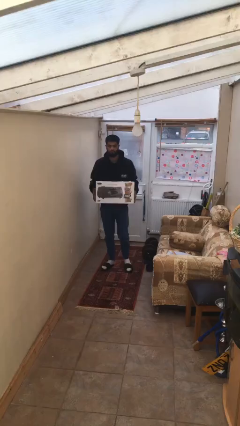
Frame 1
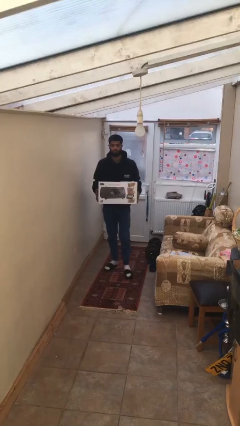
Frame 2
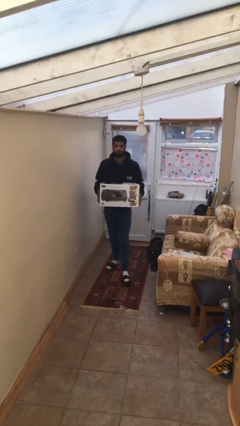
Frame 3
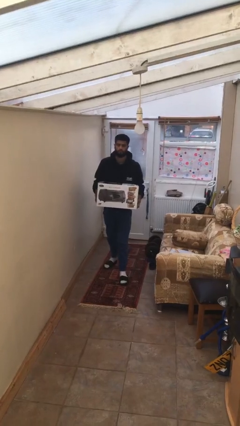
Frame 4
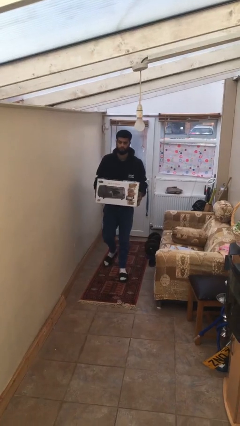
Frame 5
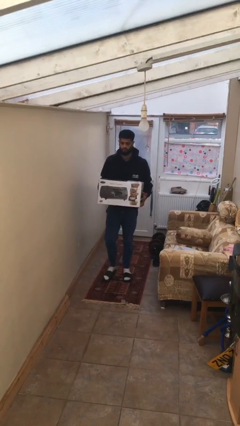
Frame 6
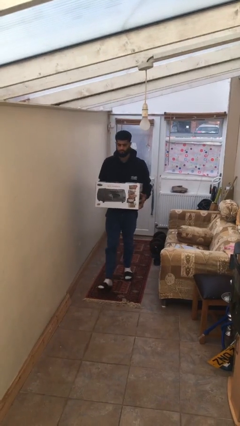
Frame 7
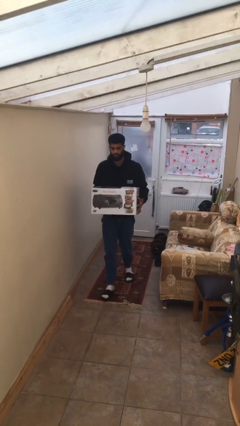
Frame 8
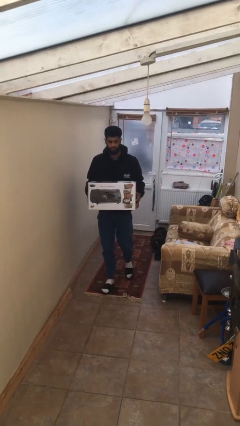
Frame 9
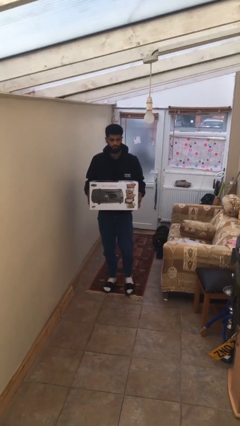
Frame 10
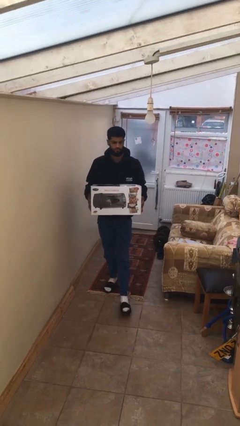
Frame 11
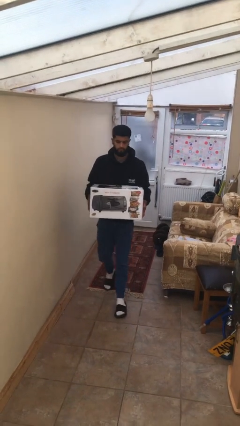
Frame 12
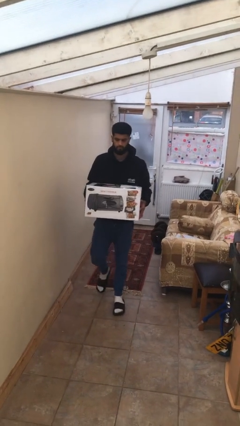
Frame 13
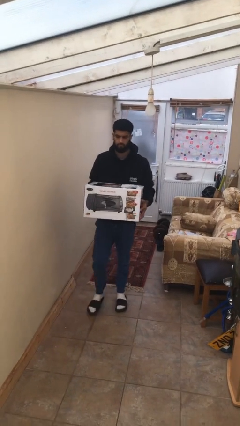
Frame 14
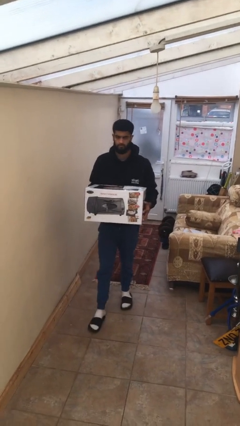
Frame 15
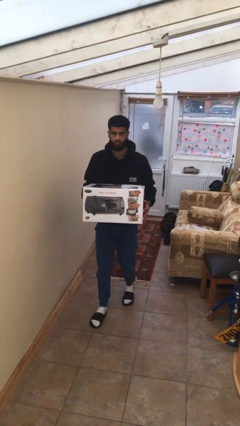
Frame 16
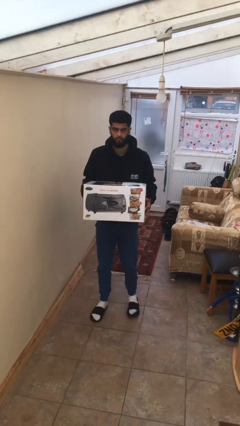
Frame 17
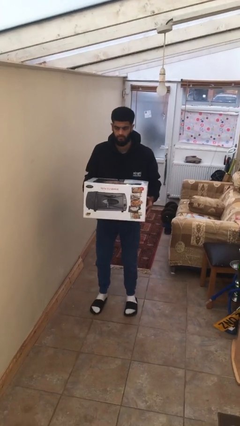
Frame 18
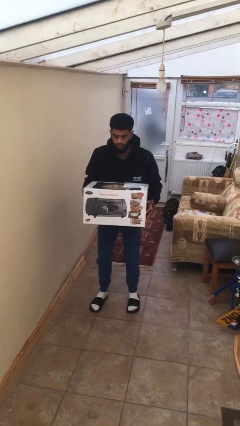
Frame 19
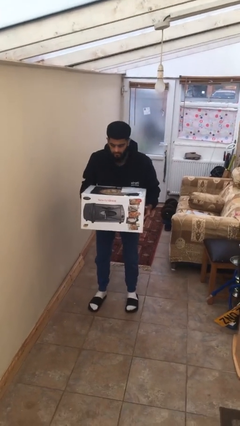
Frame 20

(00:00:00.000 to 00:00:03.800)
person carries heavy object

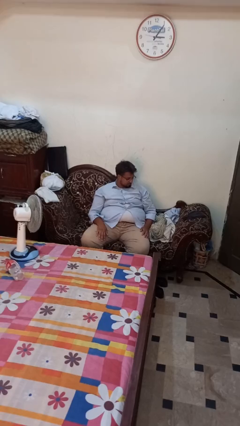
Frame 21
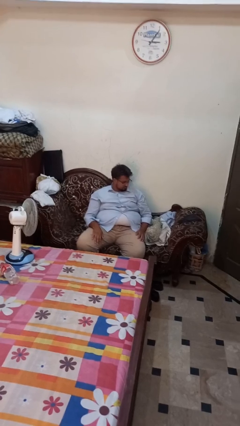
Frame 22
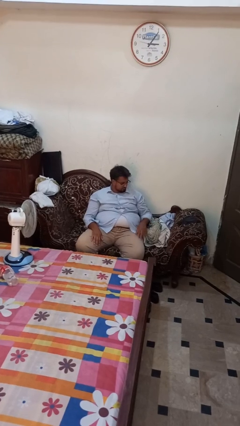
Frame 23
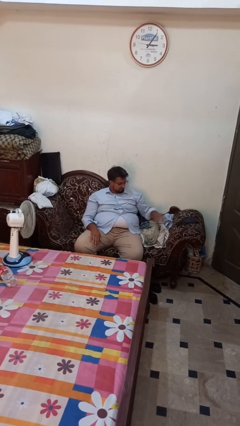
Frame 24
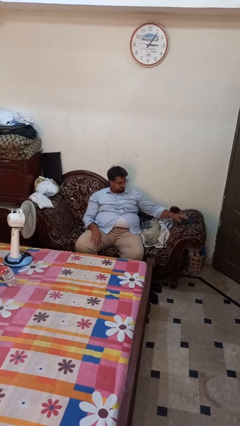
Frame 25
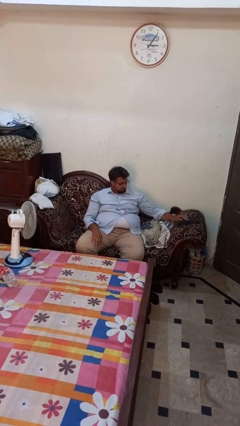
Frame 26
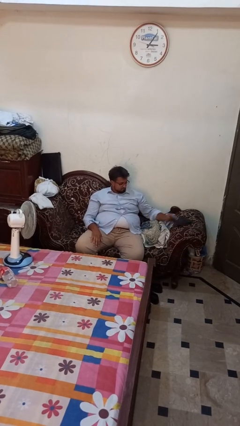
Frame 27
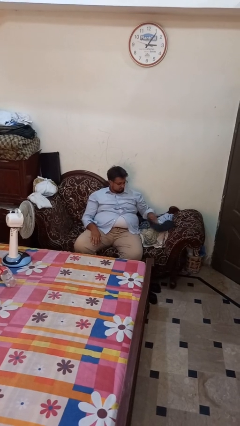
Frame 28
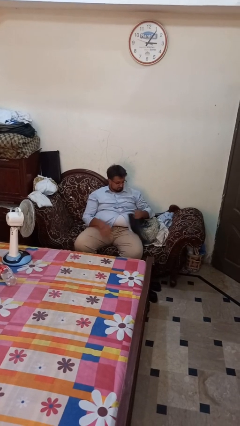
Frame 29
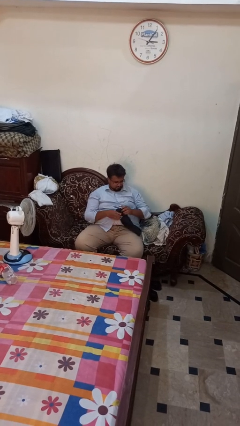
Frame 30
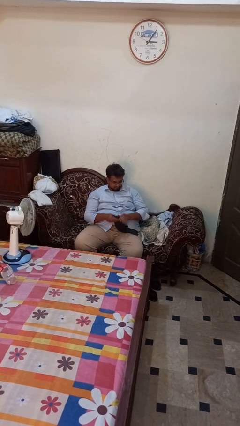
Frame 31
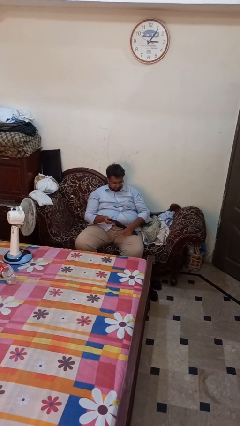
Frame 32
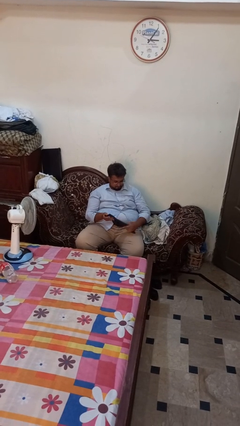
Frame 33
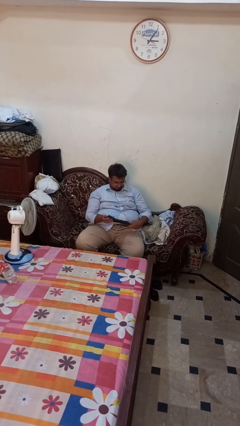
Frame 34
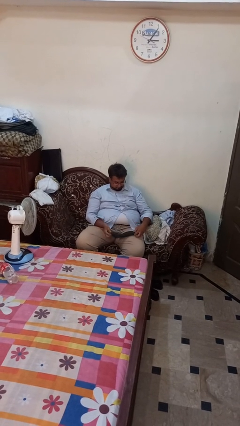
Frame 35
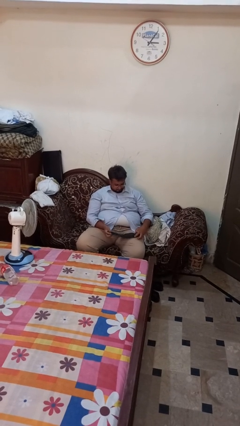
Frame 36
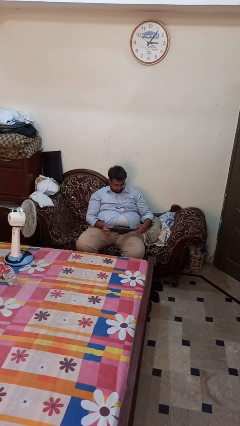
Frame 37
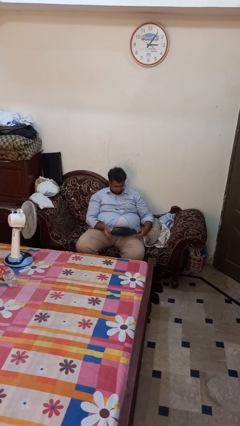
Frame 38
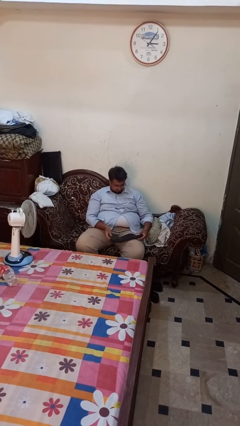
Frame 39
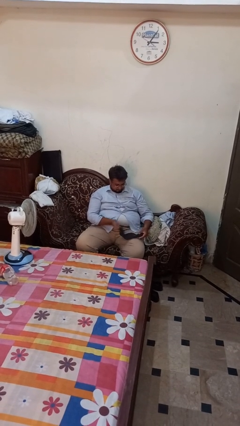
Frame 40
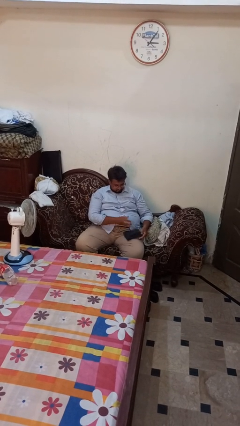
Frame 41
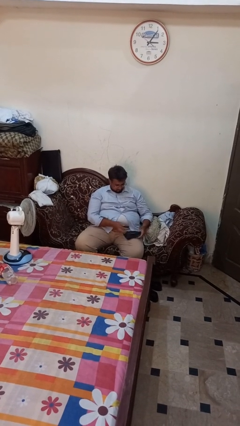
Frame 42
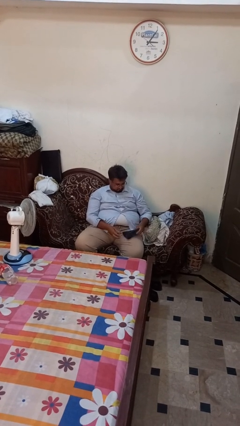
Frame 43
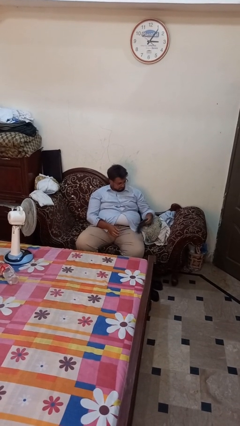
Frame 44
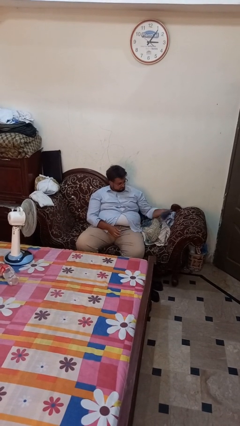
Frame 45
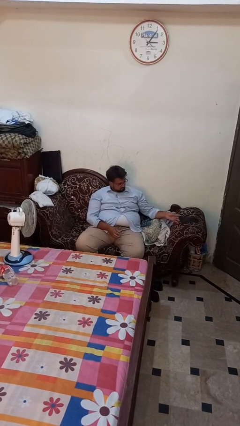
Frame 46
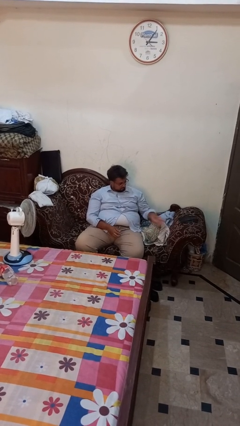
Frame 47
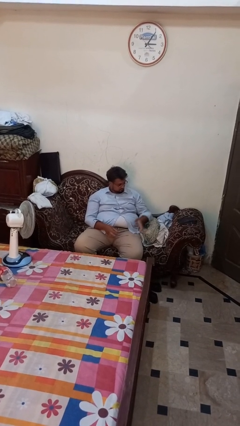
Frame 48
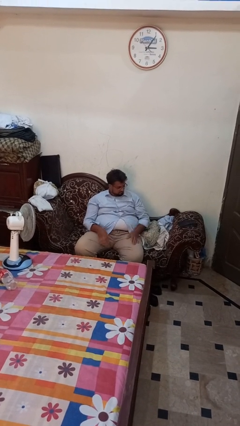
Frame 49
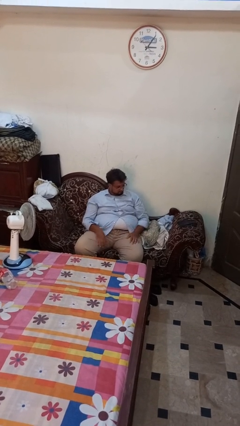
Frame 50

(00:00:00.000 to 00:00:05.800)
person folds socks

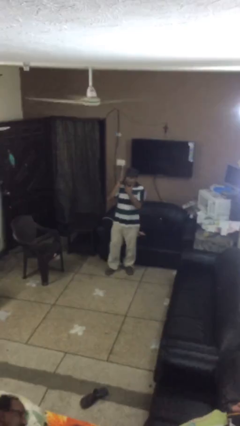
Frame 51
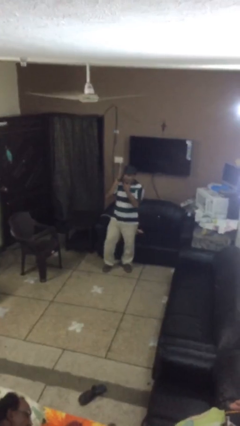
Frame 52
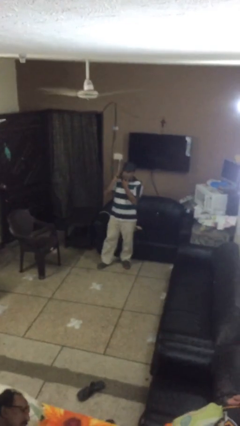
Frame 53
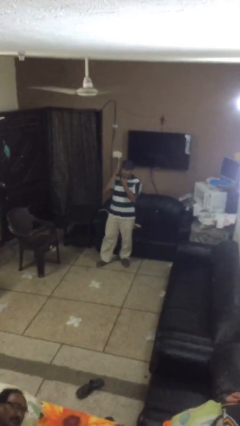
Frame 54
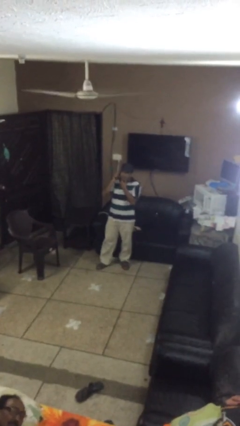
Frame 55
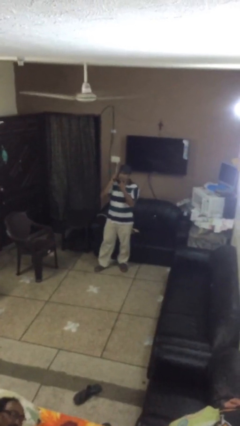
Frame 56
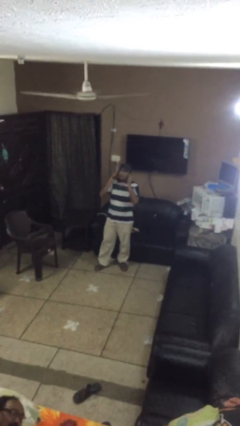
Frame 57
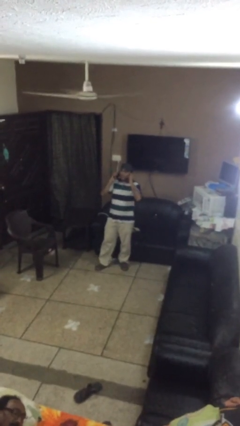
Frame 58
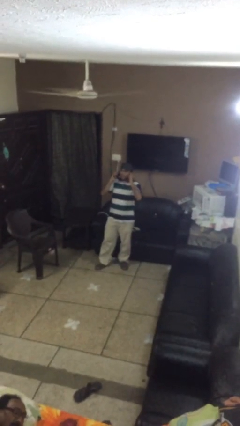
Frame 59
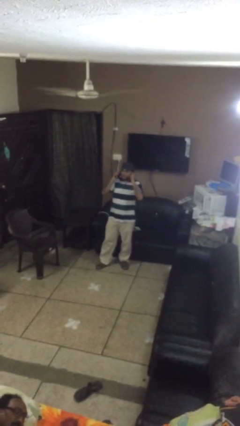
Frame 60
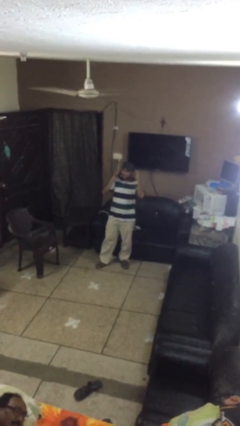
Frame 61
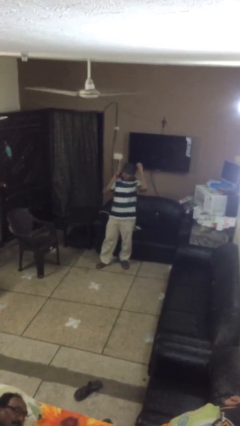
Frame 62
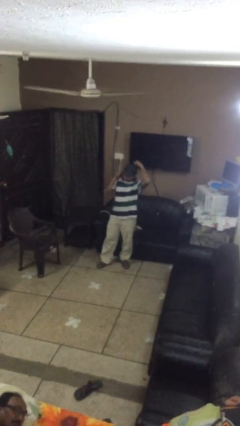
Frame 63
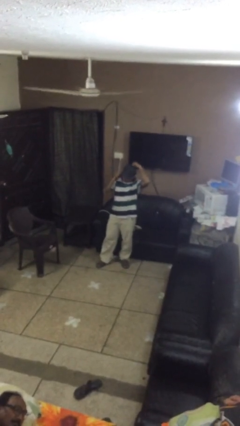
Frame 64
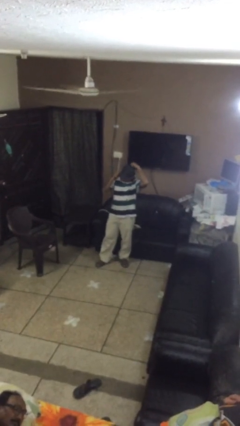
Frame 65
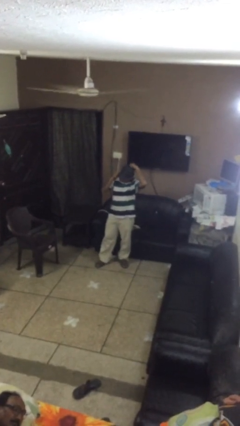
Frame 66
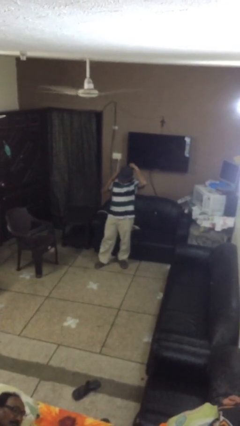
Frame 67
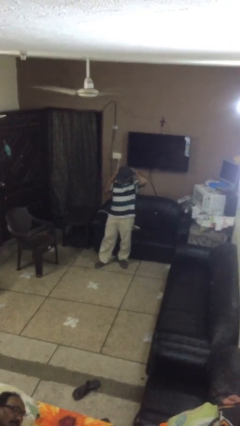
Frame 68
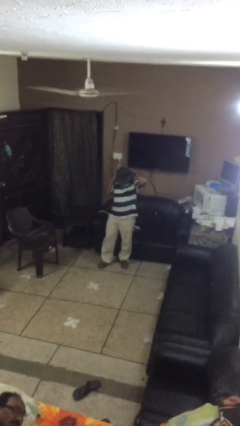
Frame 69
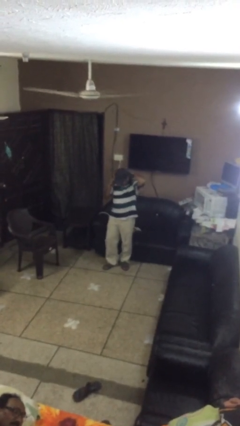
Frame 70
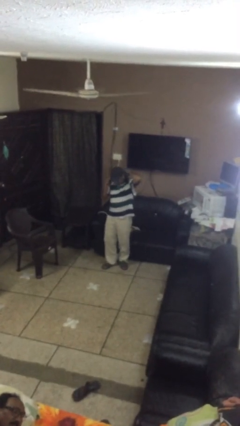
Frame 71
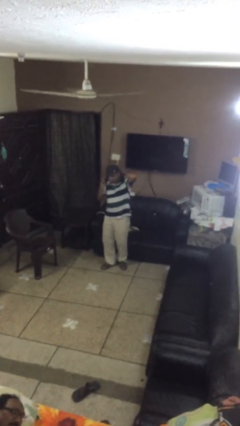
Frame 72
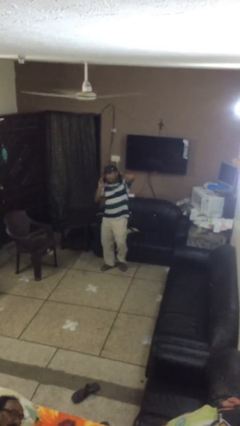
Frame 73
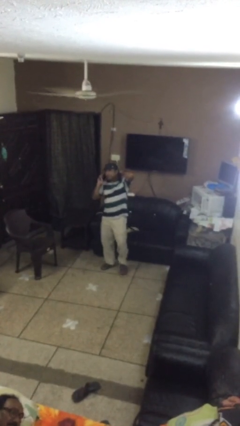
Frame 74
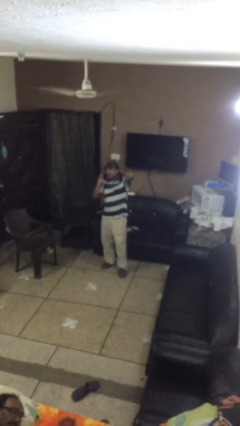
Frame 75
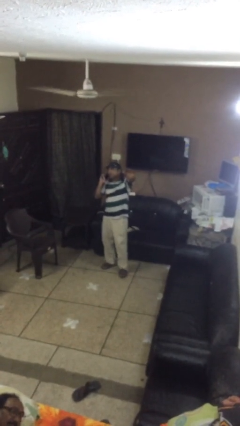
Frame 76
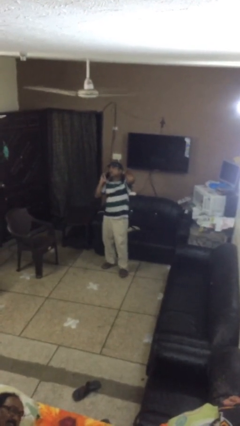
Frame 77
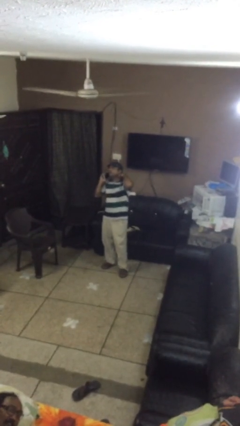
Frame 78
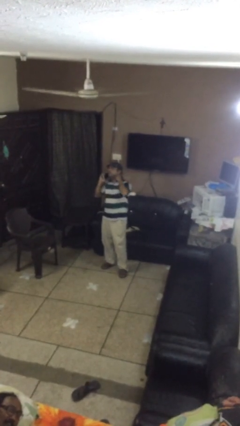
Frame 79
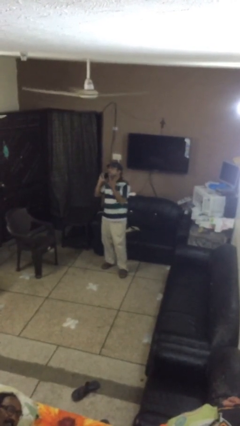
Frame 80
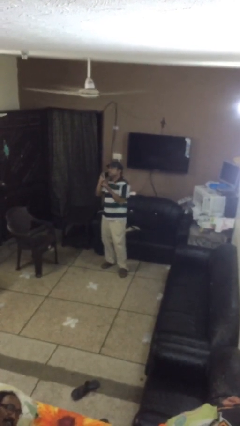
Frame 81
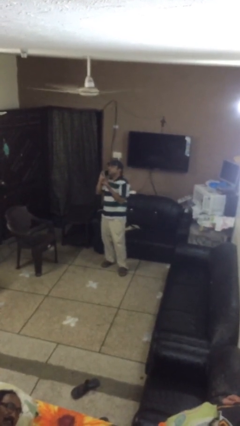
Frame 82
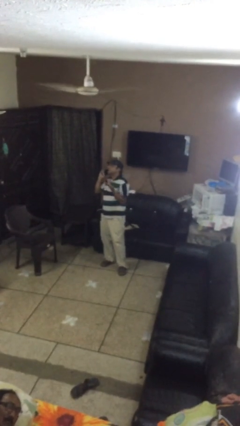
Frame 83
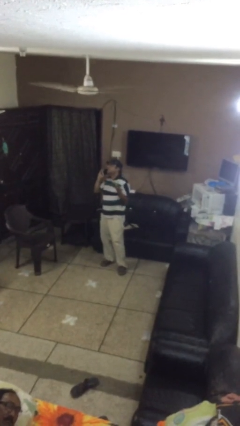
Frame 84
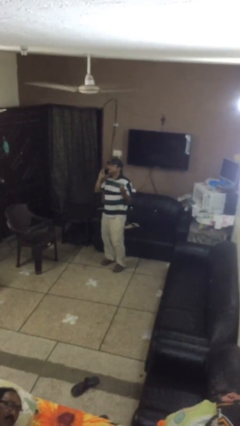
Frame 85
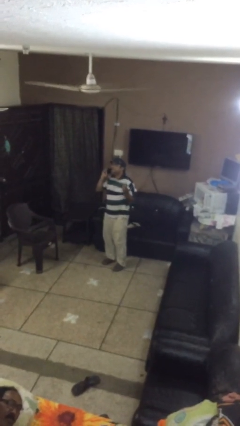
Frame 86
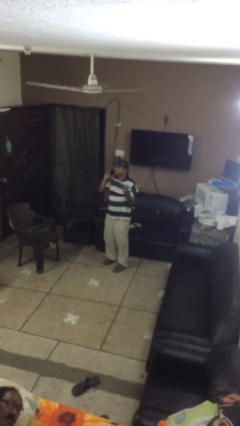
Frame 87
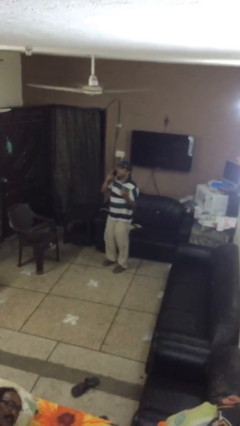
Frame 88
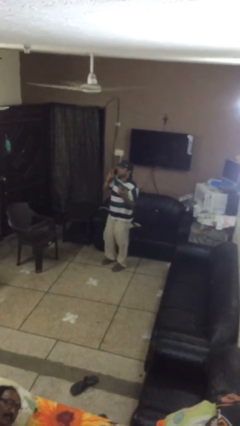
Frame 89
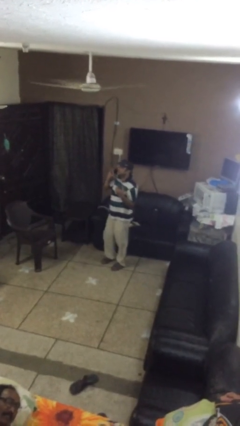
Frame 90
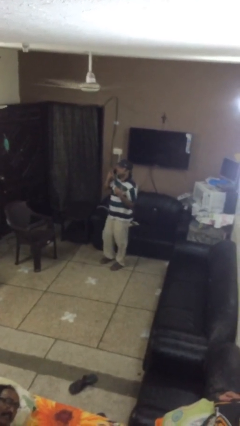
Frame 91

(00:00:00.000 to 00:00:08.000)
person talks on phone

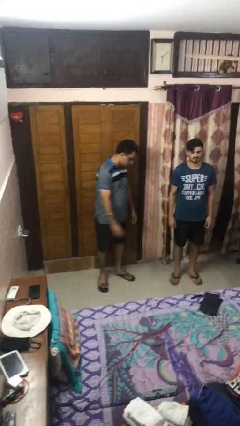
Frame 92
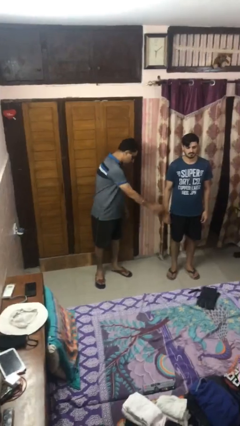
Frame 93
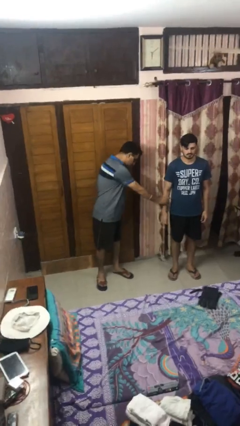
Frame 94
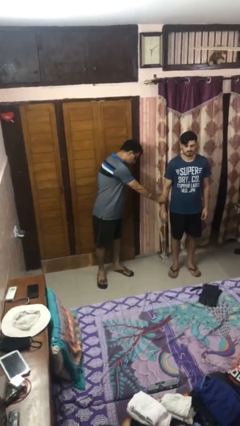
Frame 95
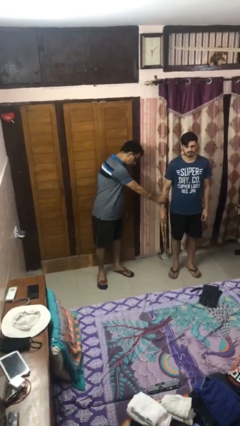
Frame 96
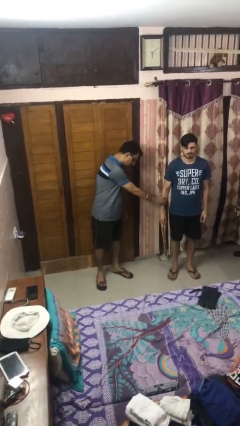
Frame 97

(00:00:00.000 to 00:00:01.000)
person grabs person by forearm
